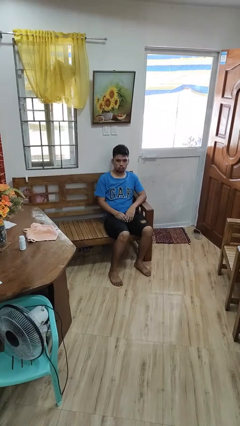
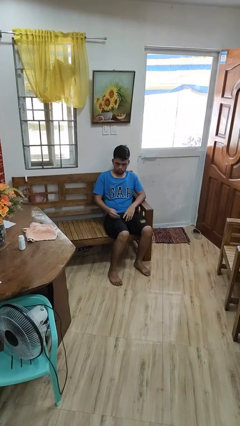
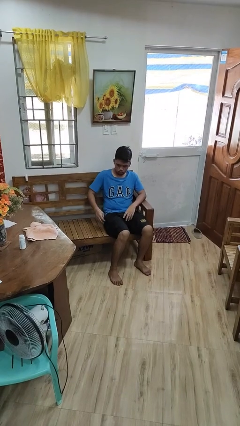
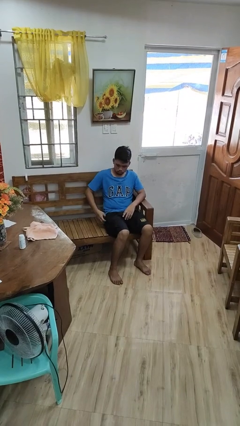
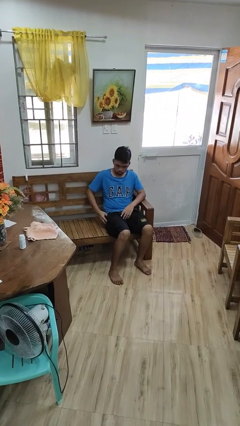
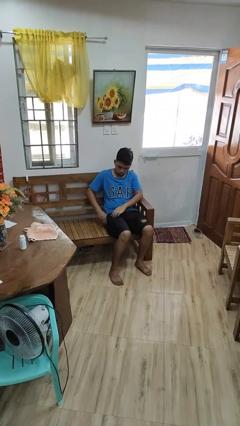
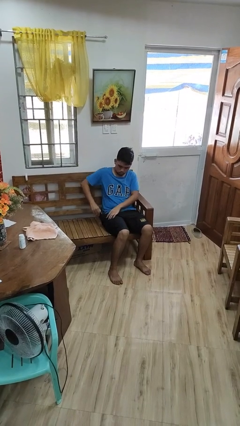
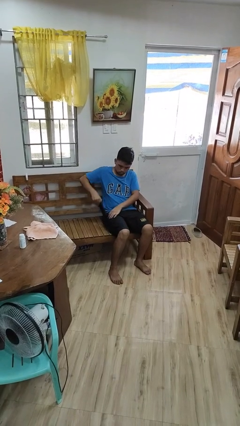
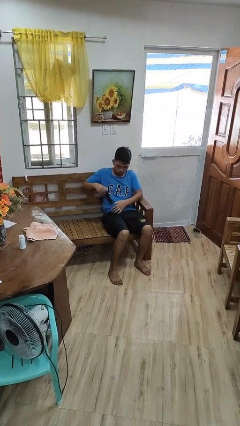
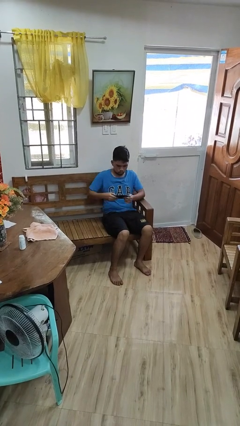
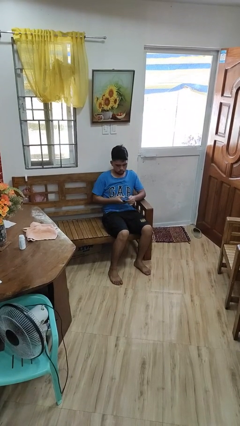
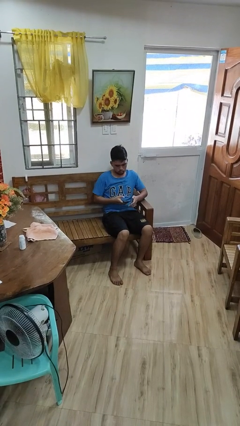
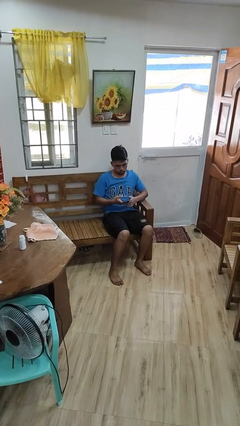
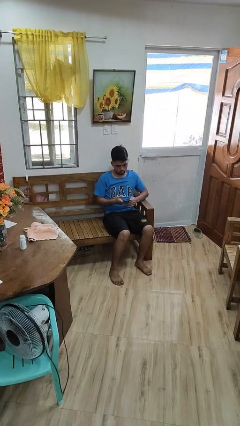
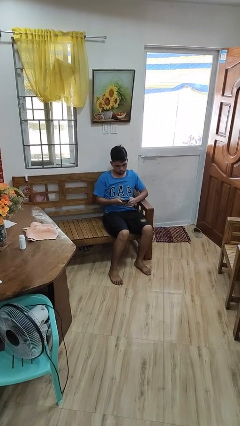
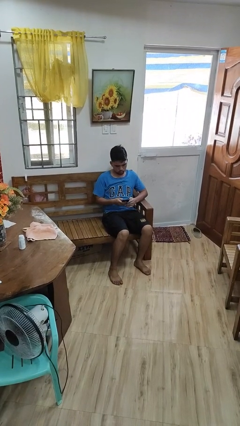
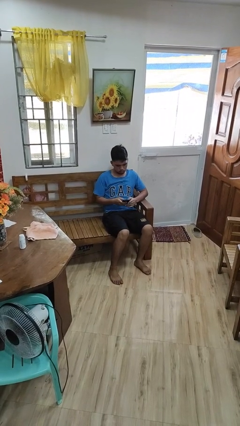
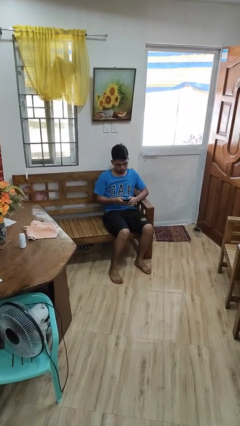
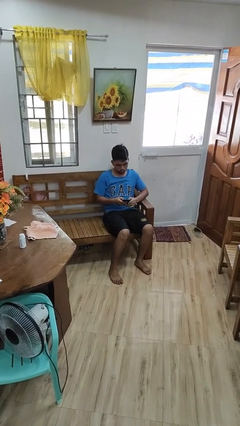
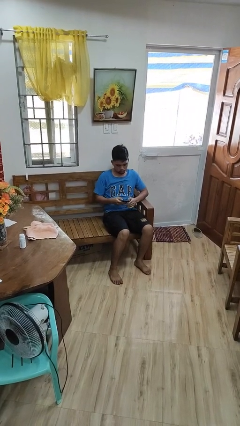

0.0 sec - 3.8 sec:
person takes phone from pocket

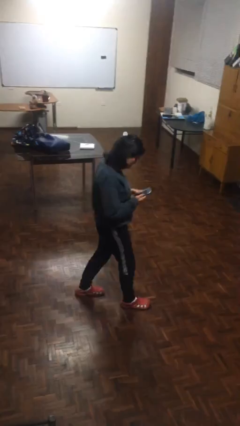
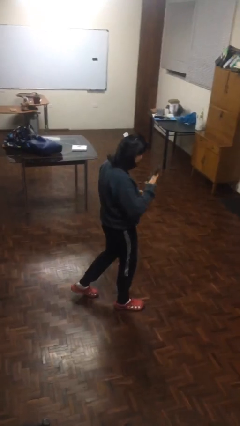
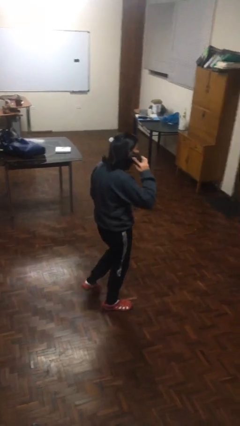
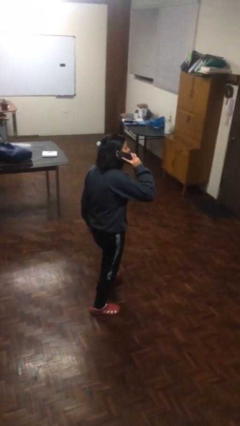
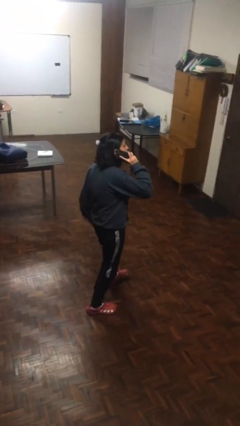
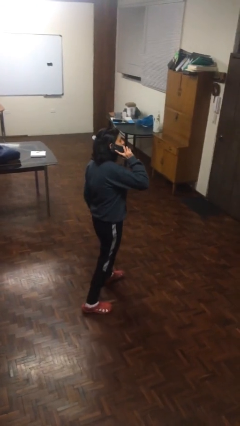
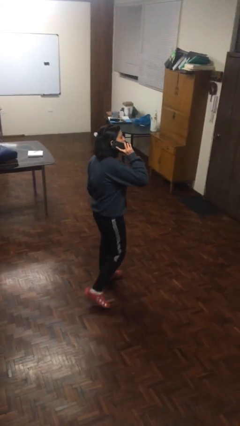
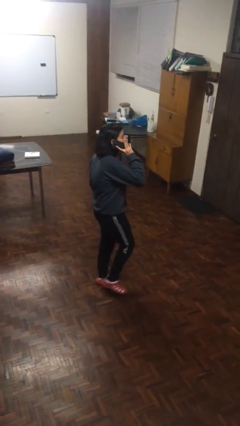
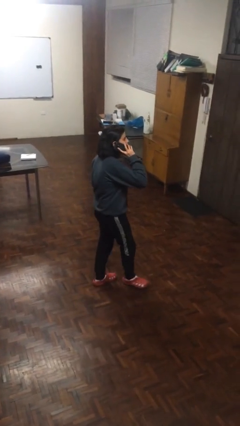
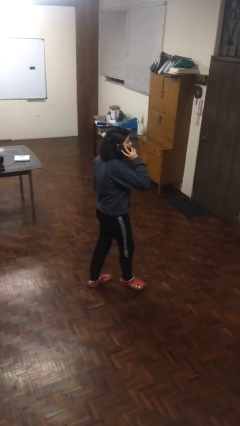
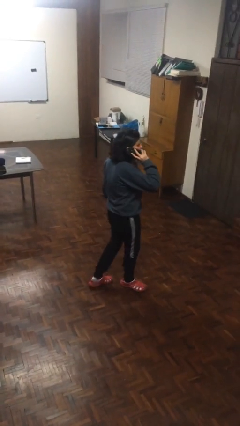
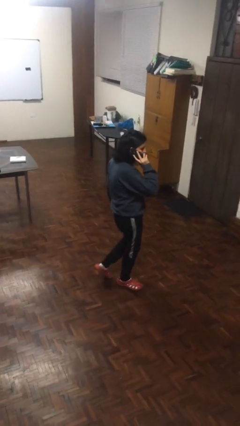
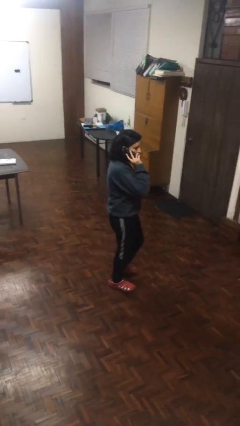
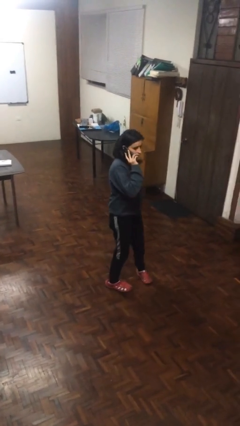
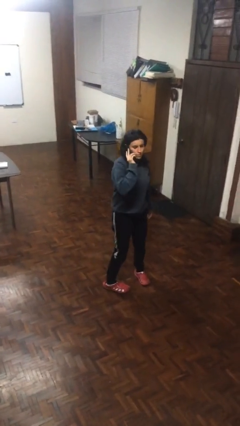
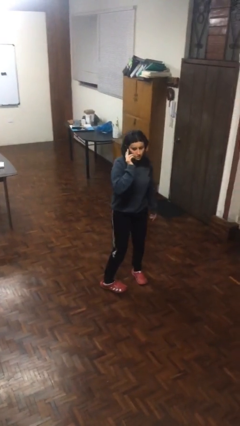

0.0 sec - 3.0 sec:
person talks on phone

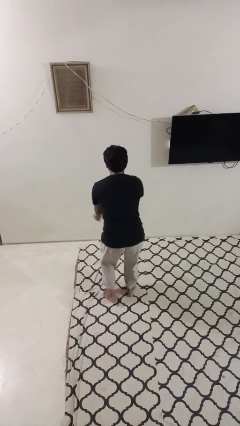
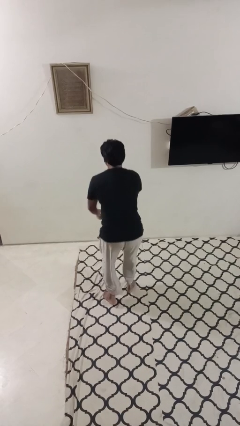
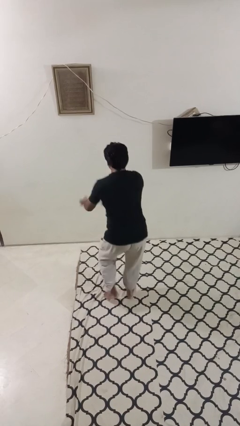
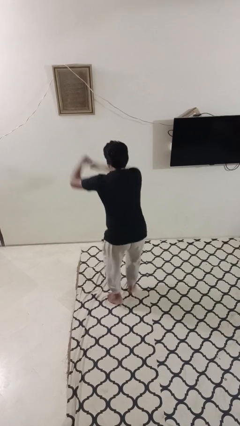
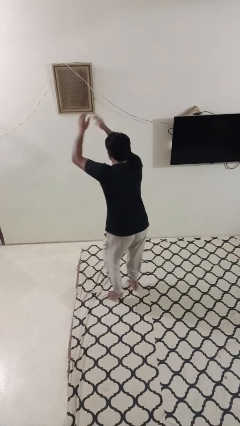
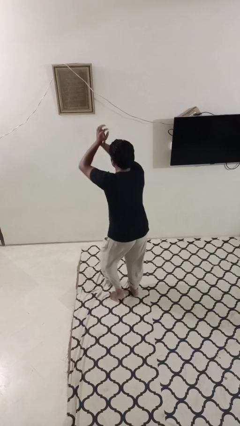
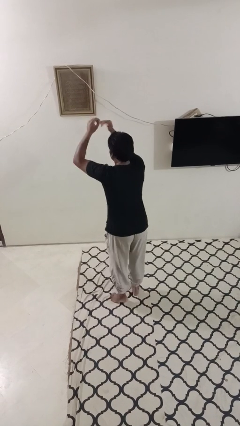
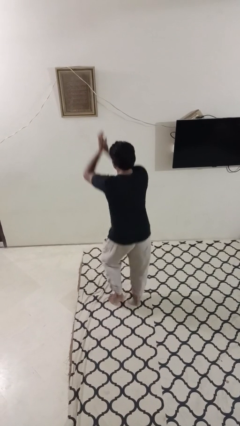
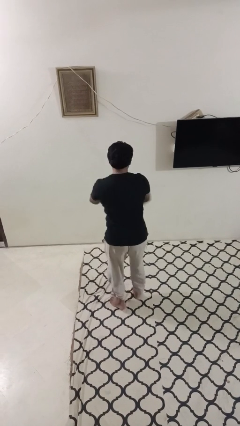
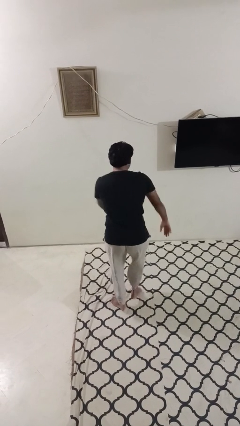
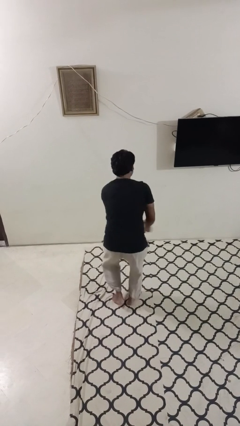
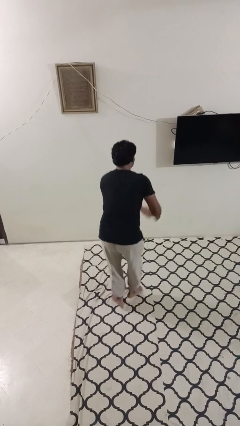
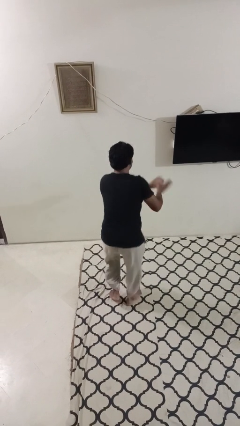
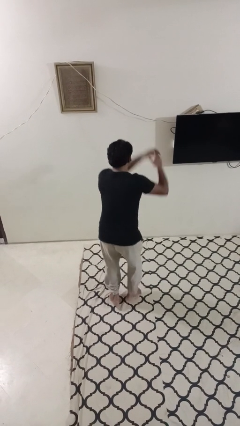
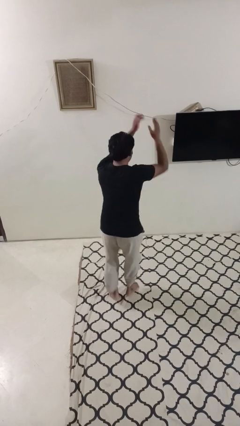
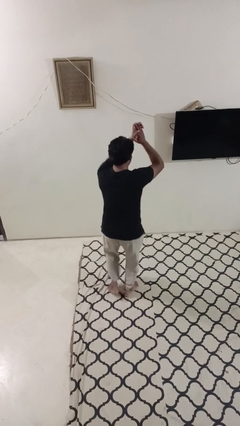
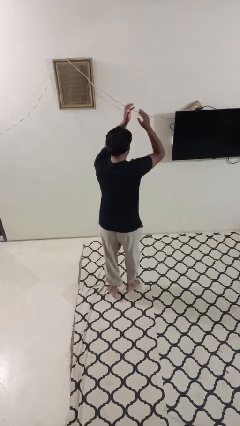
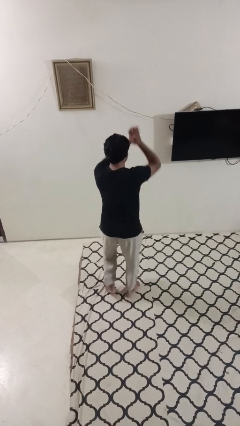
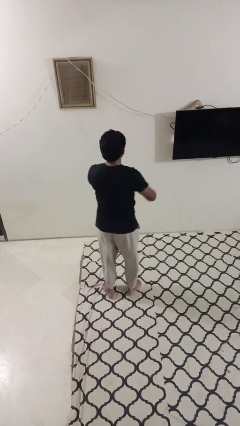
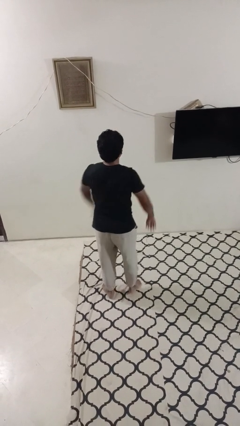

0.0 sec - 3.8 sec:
person dances in place

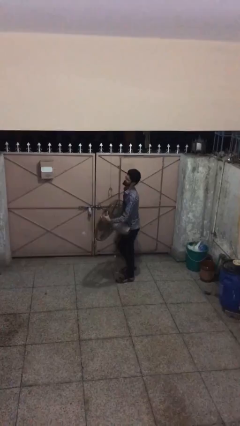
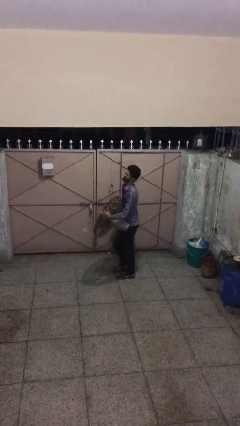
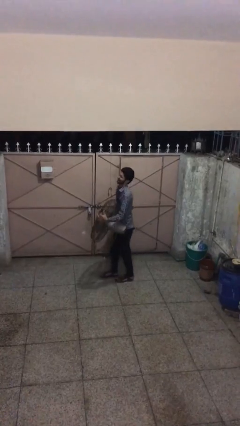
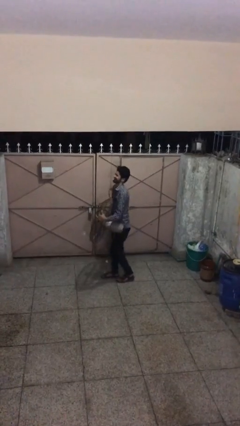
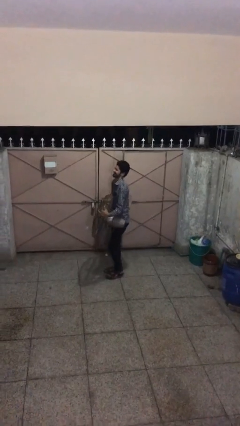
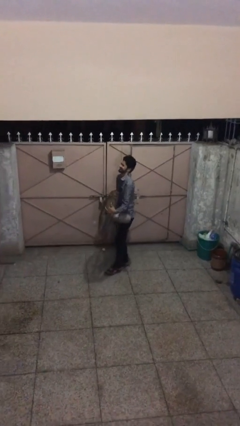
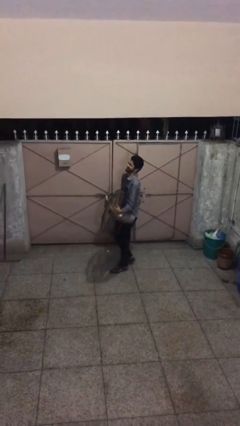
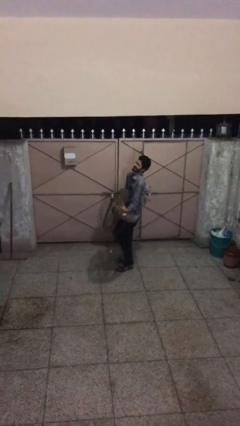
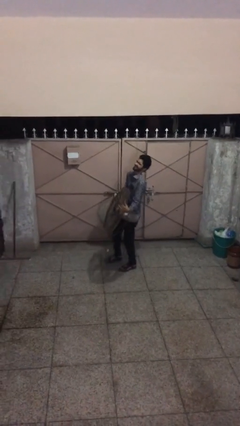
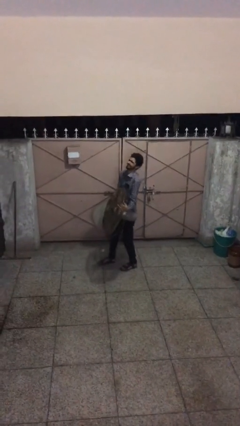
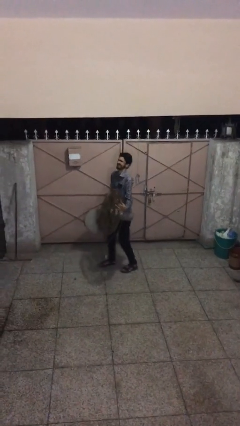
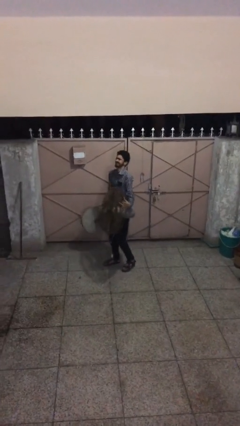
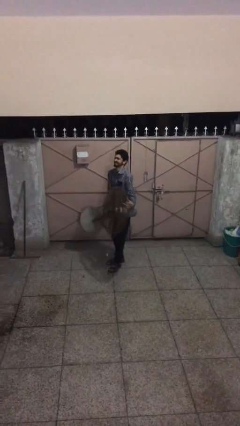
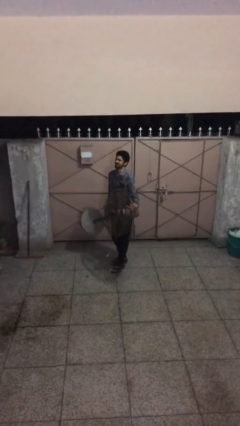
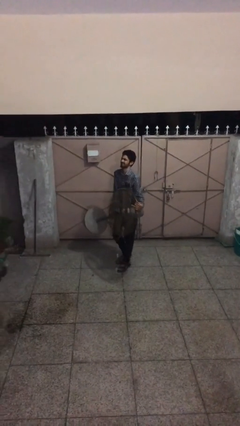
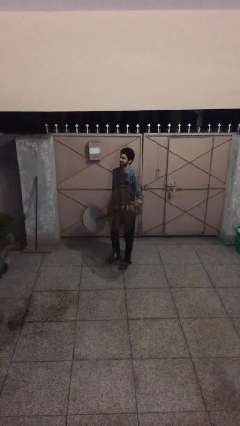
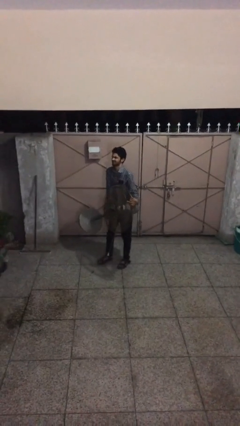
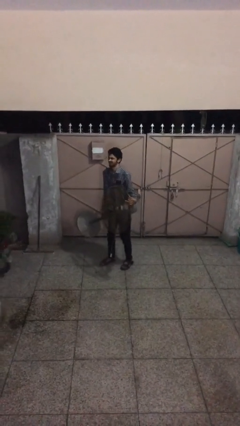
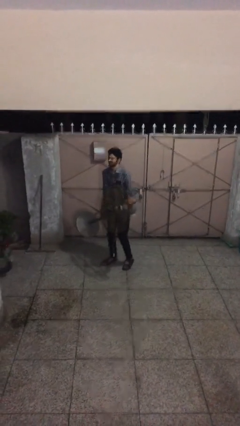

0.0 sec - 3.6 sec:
person carries heavy object

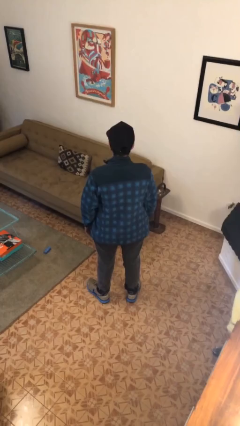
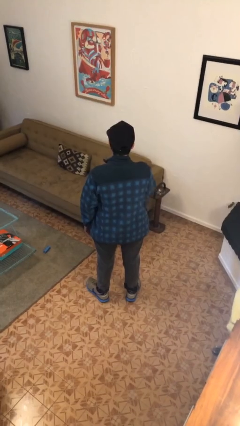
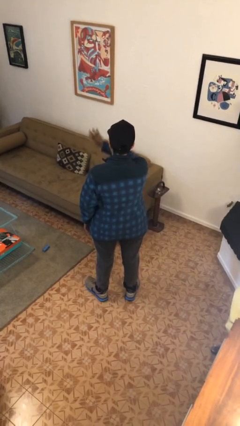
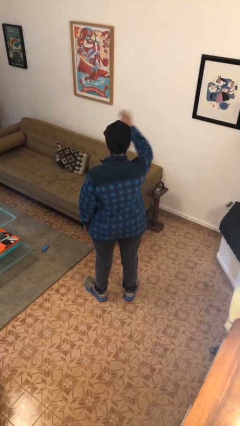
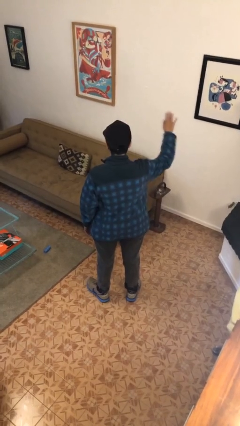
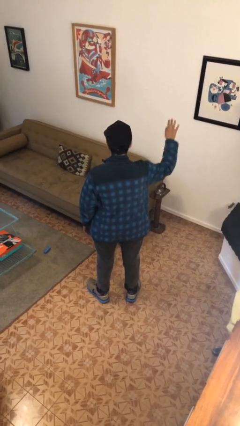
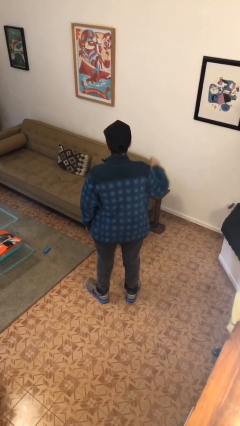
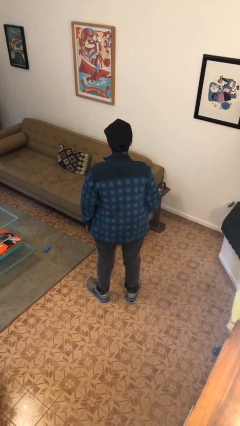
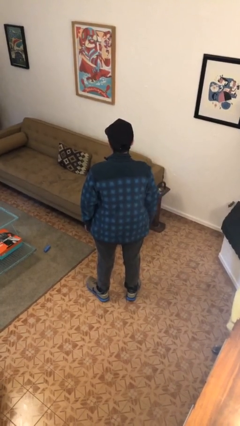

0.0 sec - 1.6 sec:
person gestures swipe right

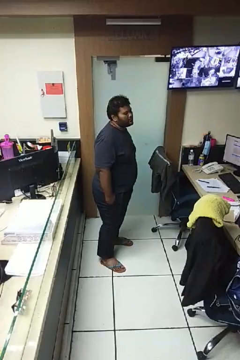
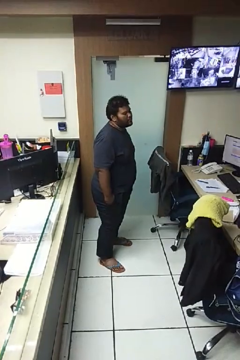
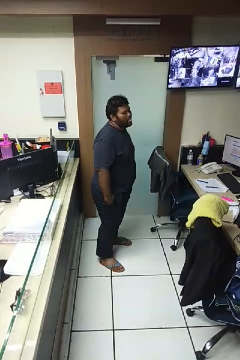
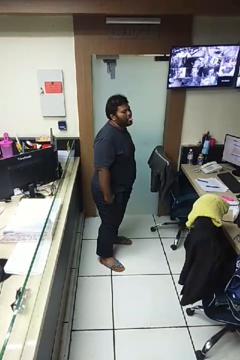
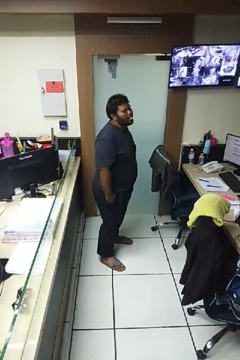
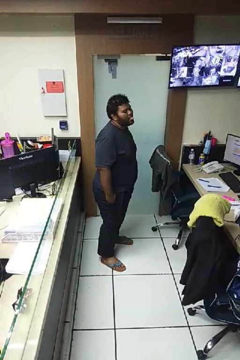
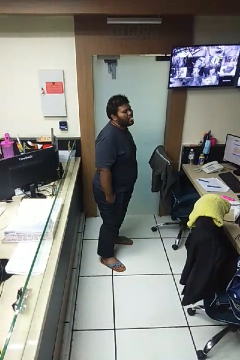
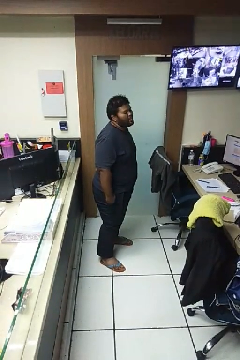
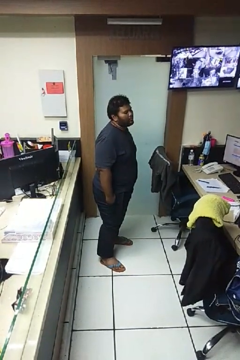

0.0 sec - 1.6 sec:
person sticks out tongue
